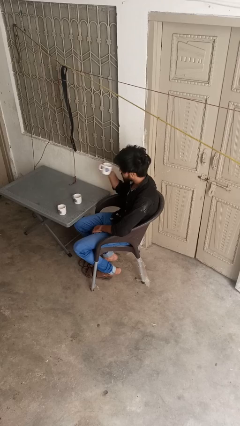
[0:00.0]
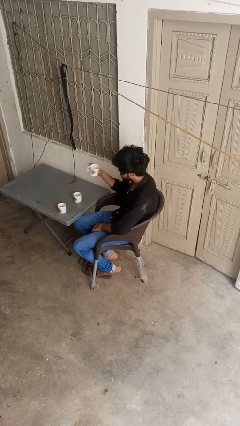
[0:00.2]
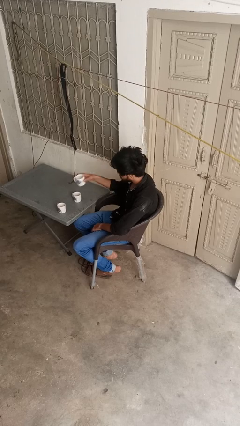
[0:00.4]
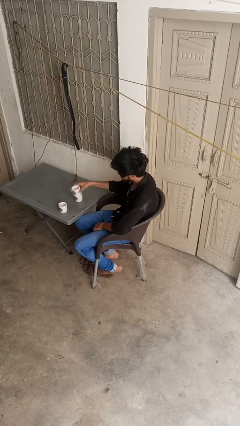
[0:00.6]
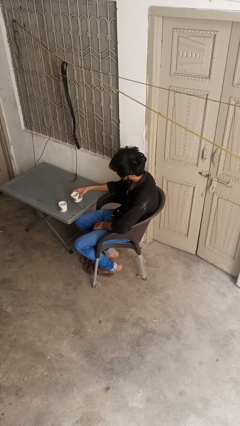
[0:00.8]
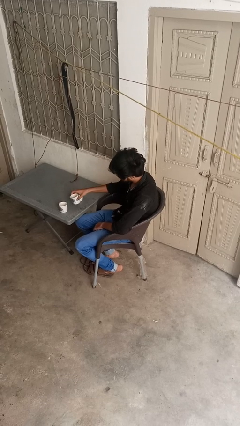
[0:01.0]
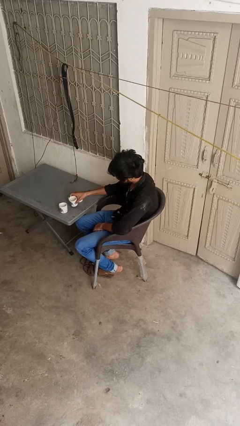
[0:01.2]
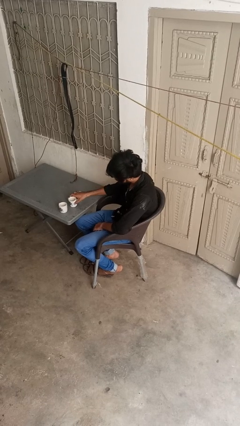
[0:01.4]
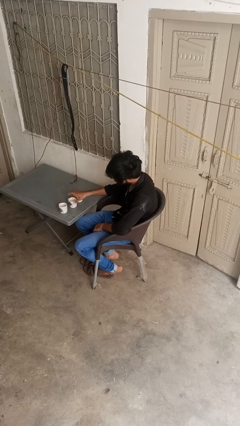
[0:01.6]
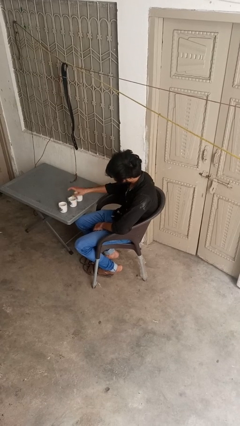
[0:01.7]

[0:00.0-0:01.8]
person puts down object on table

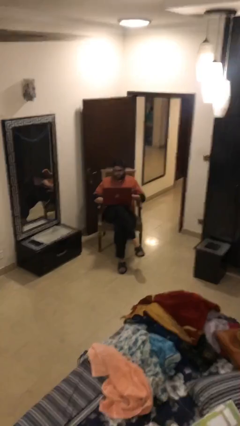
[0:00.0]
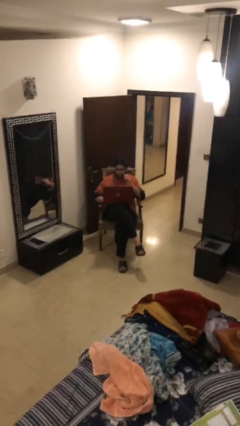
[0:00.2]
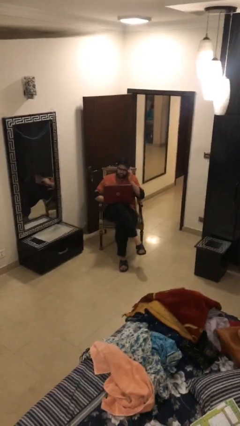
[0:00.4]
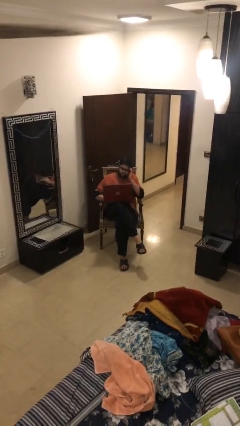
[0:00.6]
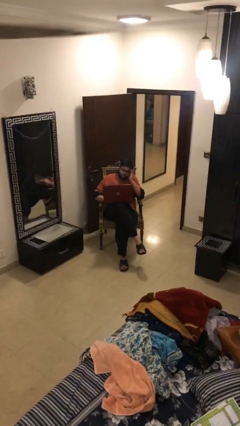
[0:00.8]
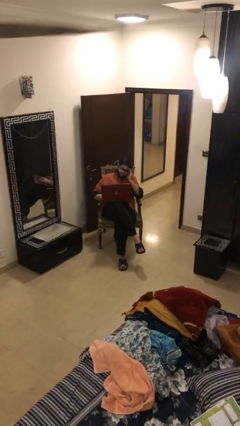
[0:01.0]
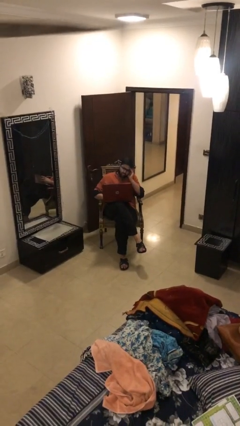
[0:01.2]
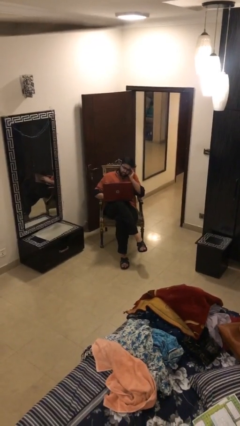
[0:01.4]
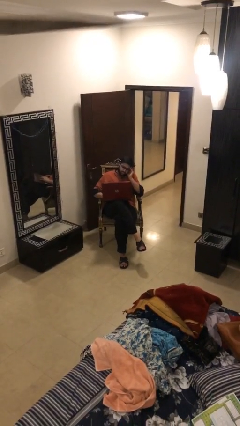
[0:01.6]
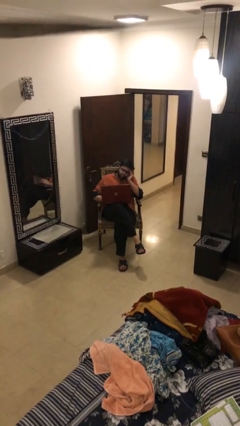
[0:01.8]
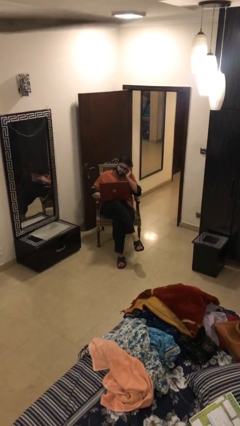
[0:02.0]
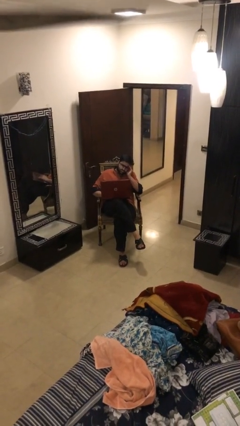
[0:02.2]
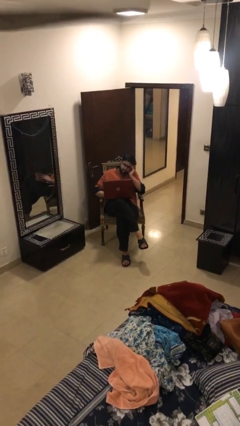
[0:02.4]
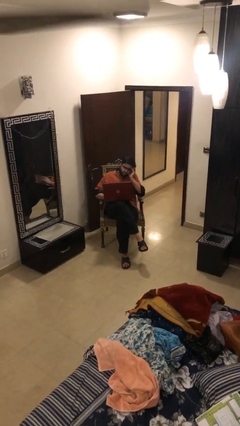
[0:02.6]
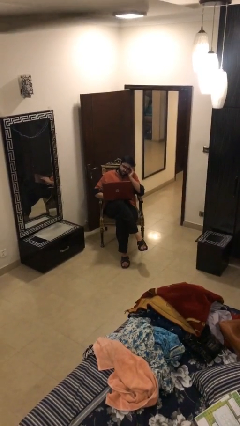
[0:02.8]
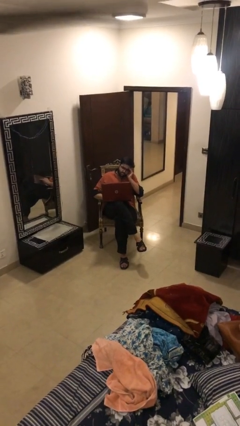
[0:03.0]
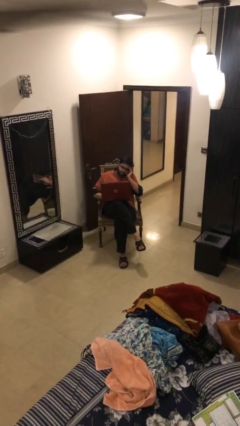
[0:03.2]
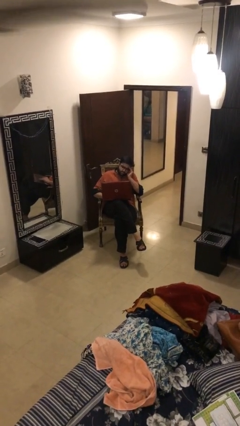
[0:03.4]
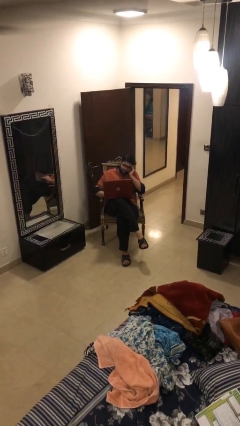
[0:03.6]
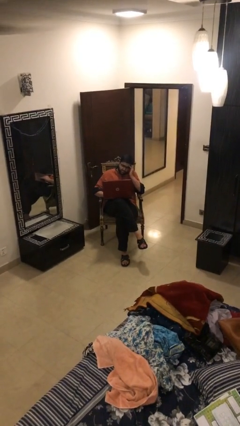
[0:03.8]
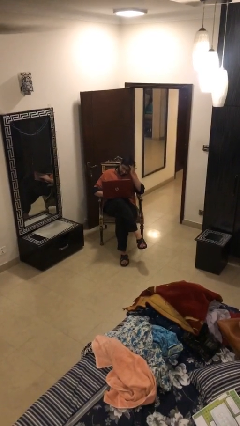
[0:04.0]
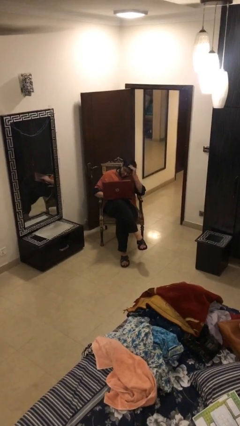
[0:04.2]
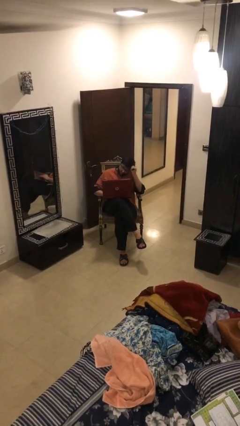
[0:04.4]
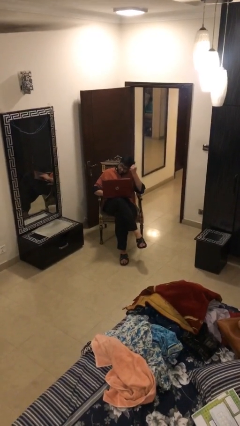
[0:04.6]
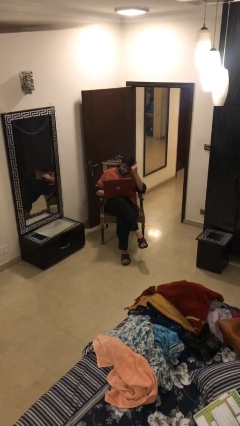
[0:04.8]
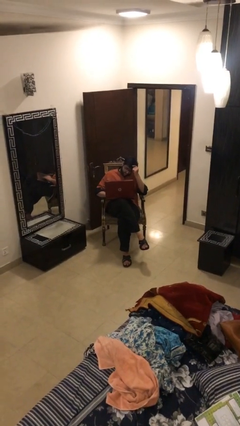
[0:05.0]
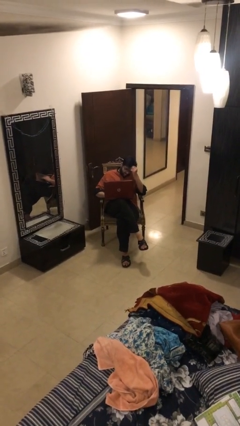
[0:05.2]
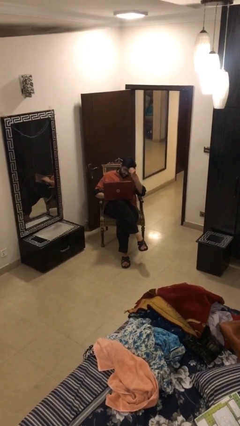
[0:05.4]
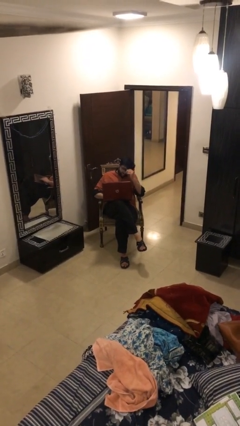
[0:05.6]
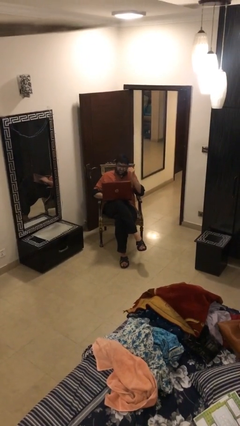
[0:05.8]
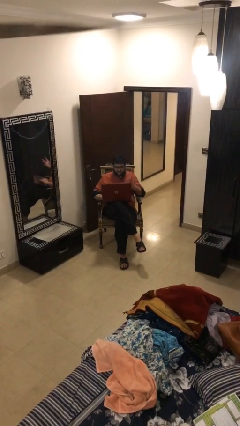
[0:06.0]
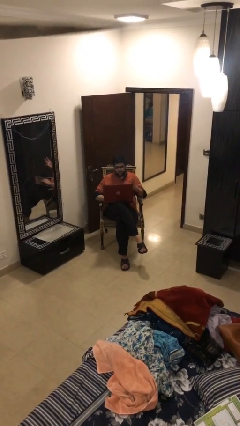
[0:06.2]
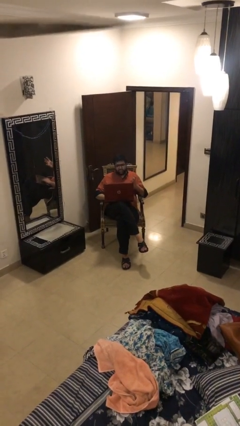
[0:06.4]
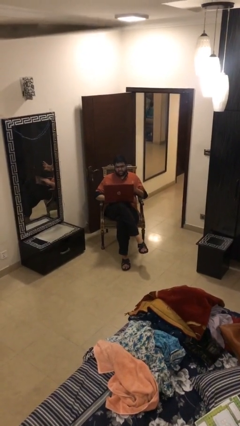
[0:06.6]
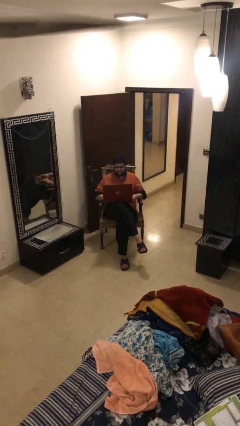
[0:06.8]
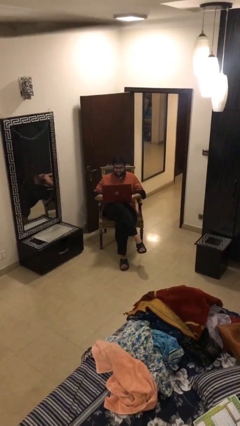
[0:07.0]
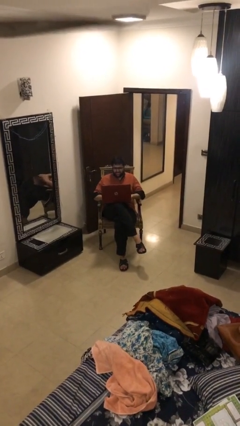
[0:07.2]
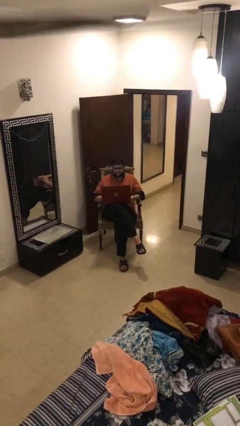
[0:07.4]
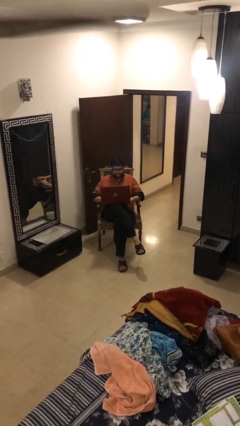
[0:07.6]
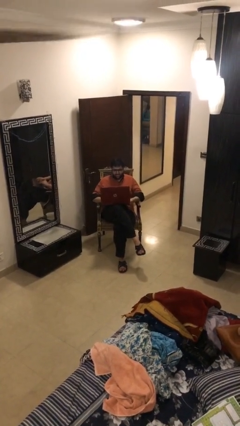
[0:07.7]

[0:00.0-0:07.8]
person interacts with laptop

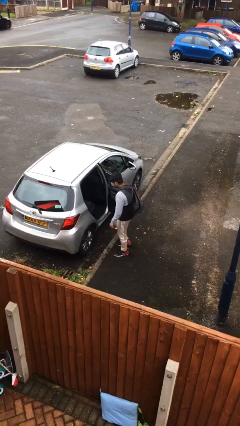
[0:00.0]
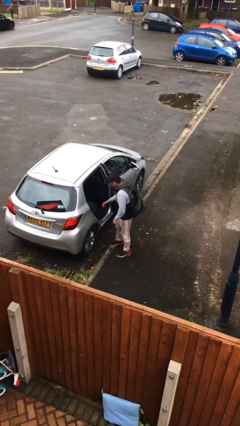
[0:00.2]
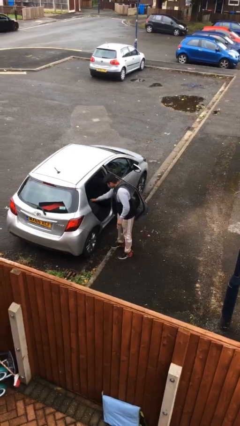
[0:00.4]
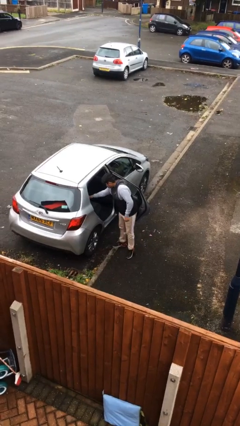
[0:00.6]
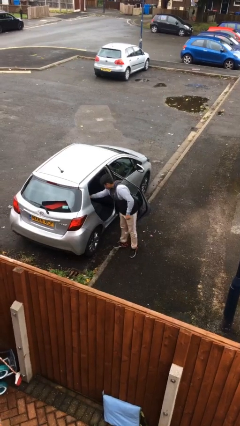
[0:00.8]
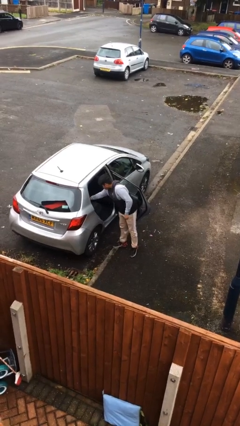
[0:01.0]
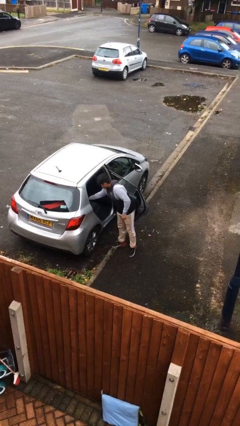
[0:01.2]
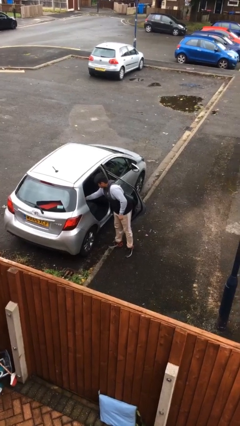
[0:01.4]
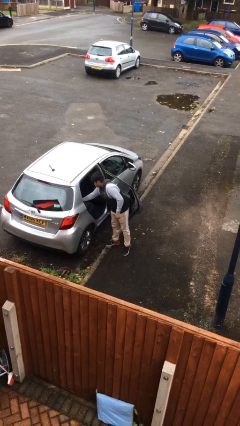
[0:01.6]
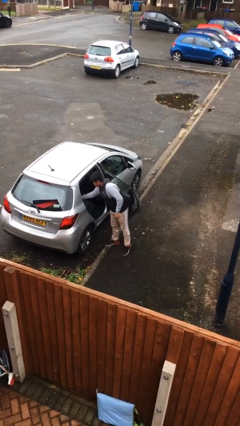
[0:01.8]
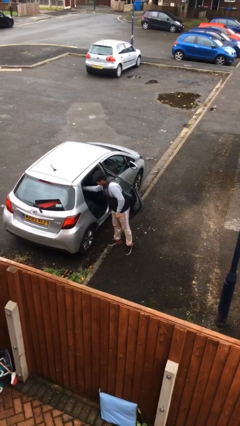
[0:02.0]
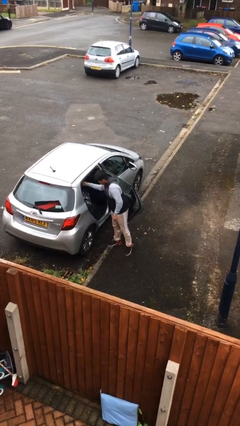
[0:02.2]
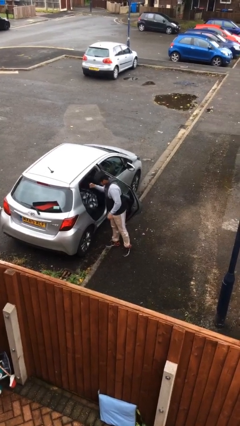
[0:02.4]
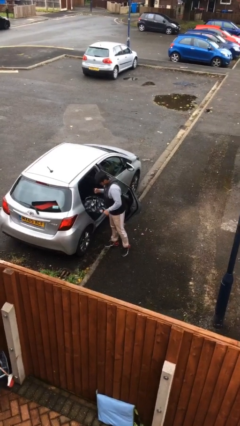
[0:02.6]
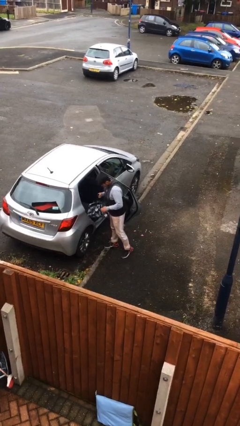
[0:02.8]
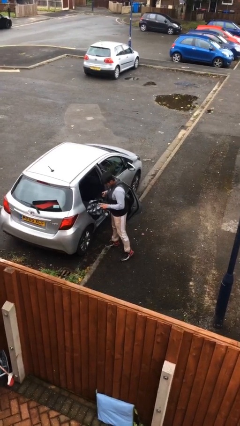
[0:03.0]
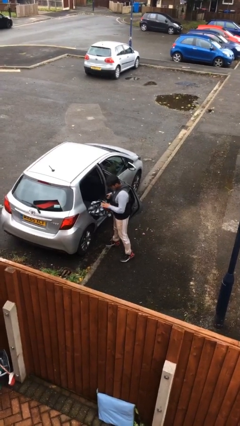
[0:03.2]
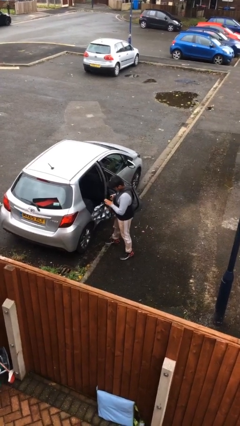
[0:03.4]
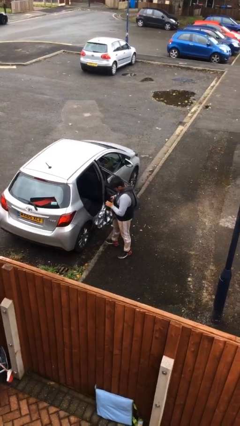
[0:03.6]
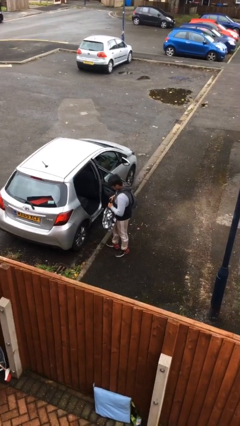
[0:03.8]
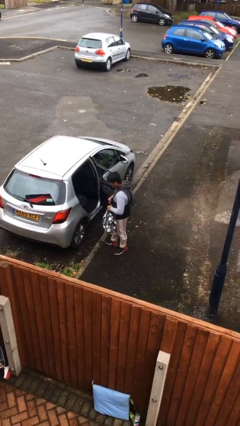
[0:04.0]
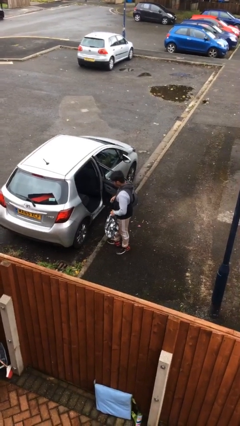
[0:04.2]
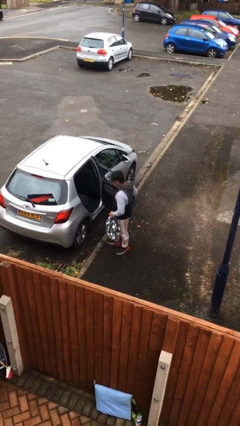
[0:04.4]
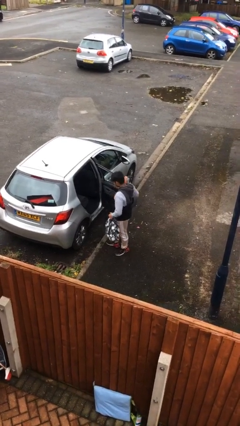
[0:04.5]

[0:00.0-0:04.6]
person unloads car

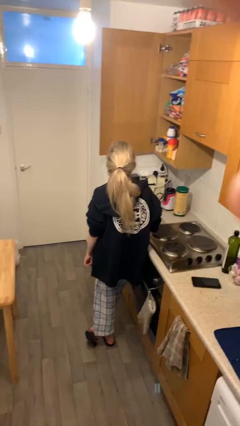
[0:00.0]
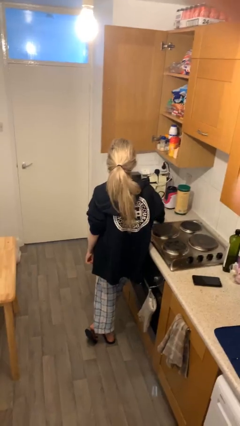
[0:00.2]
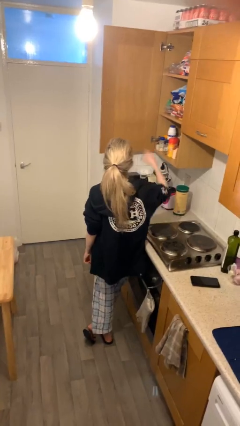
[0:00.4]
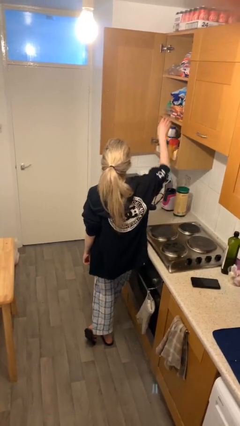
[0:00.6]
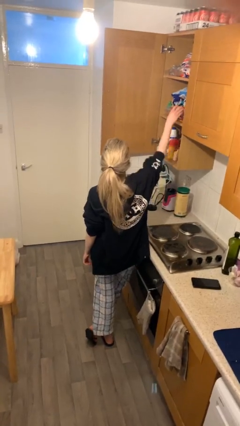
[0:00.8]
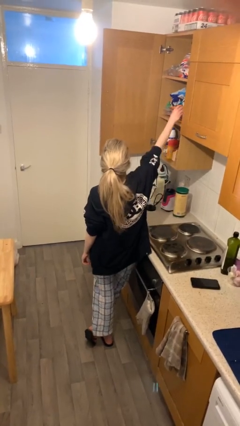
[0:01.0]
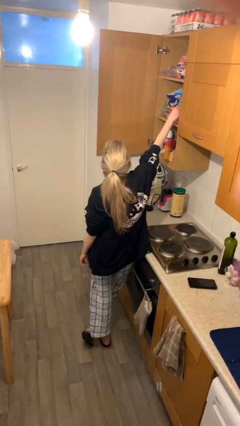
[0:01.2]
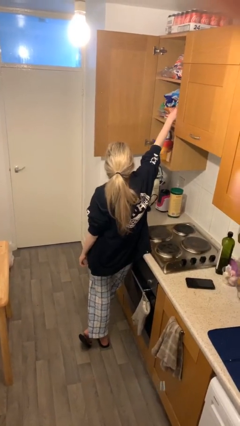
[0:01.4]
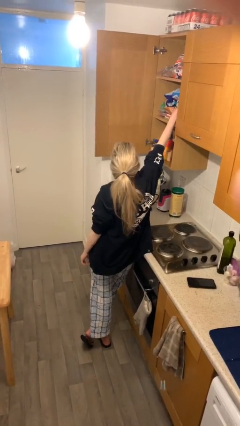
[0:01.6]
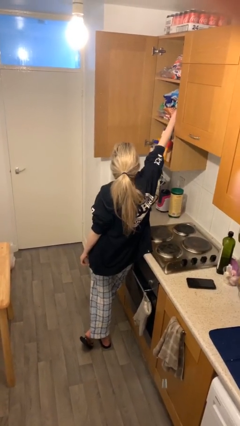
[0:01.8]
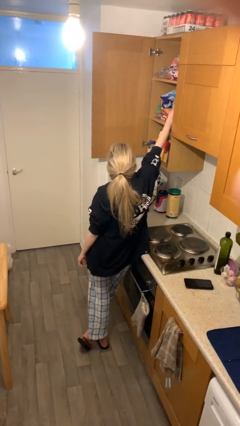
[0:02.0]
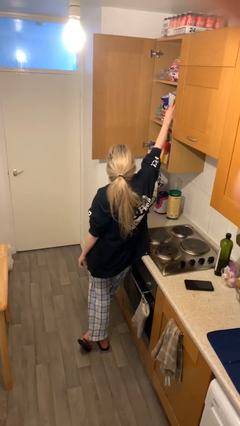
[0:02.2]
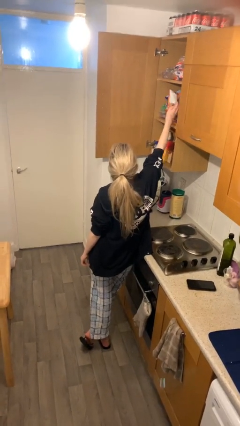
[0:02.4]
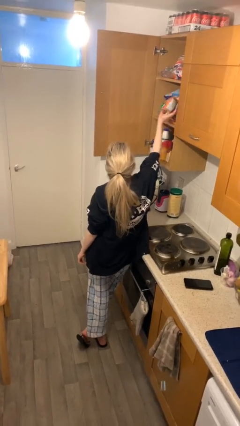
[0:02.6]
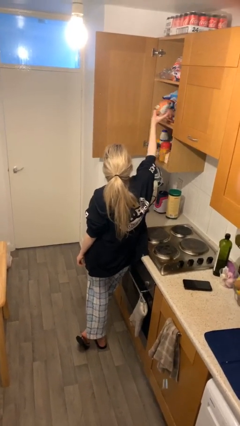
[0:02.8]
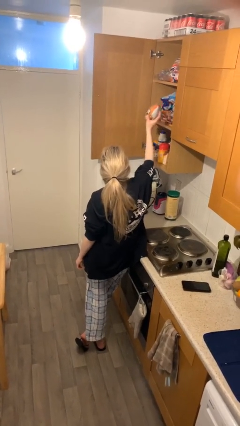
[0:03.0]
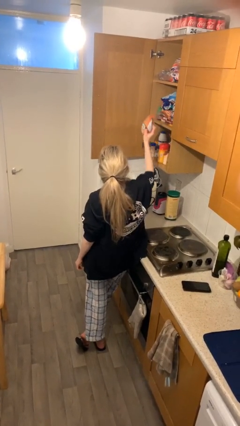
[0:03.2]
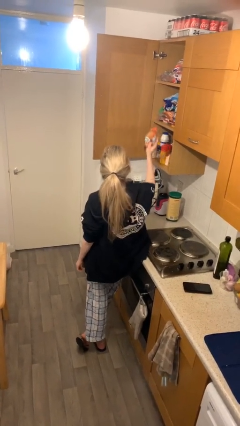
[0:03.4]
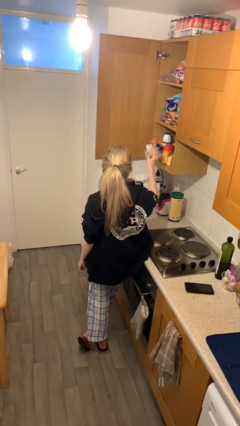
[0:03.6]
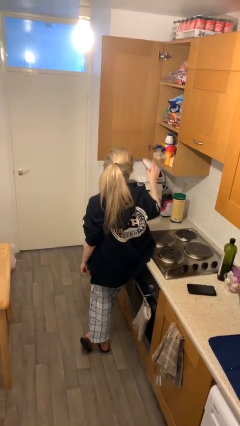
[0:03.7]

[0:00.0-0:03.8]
person picks up object from shelf
